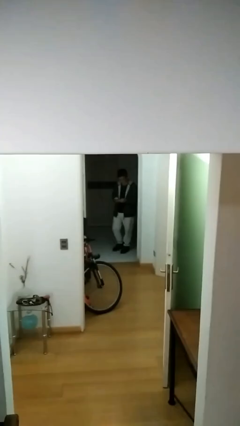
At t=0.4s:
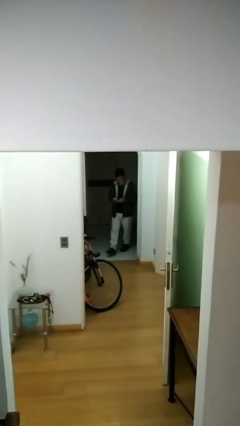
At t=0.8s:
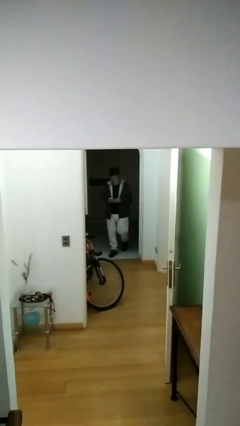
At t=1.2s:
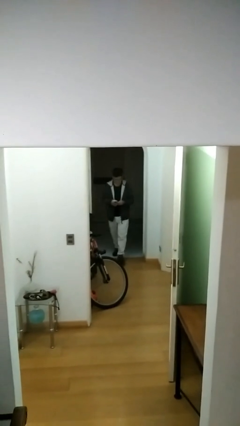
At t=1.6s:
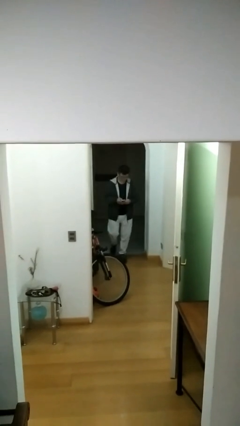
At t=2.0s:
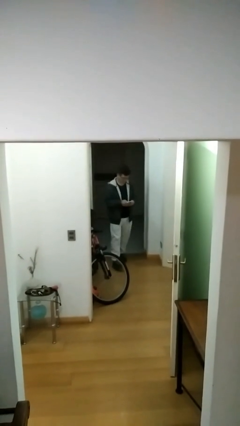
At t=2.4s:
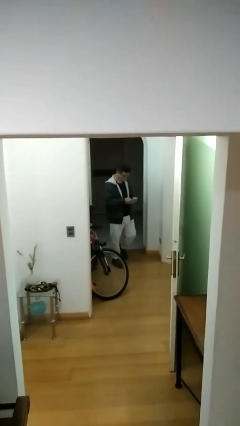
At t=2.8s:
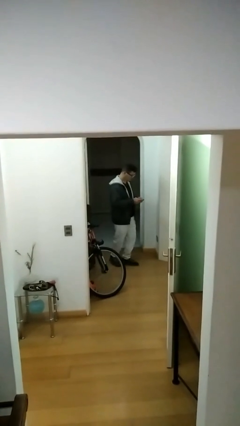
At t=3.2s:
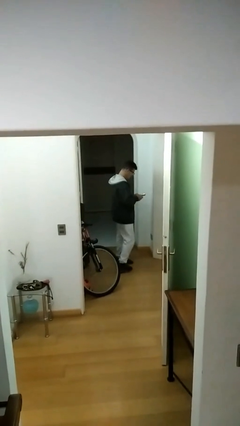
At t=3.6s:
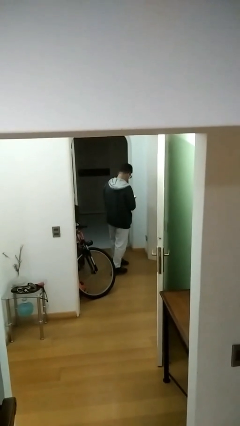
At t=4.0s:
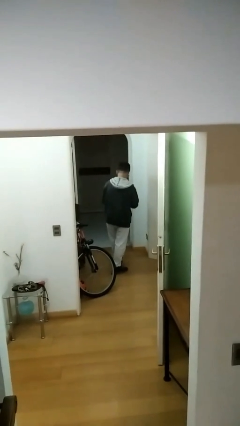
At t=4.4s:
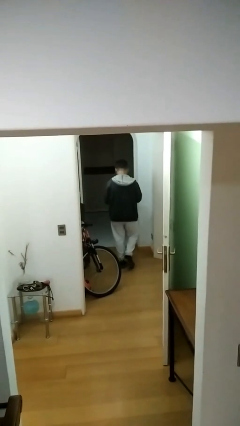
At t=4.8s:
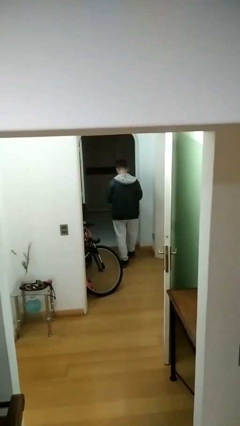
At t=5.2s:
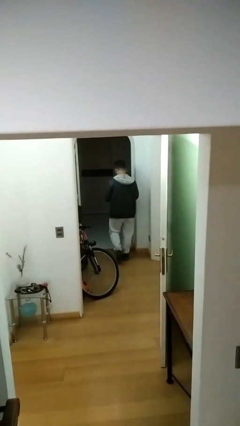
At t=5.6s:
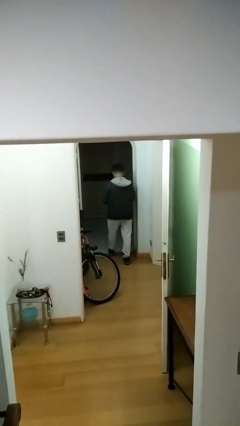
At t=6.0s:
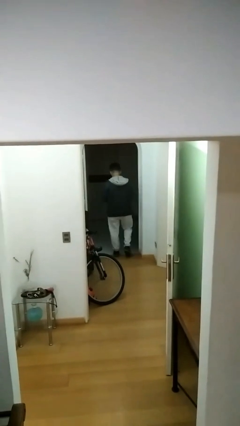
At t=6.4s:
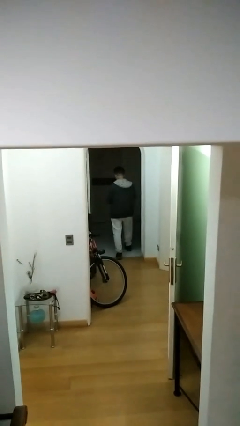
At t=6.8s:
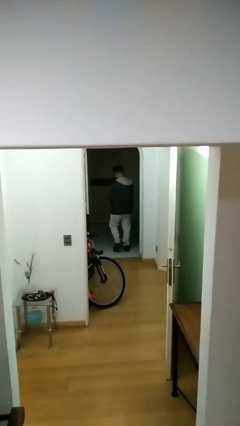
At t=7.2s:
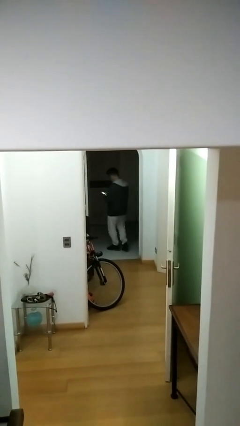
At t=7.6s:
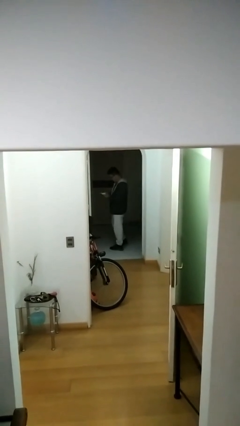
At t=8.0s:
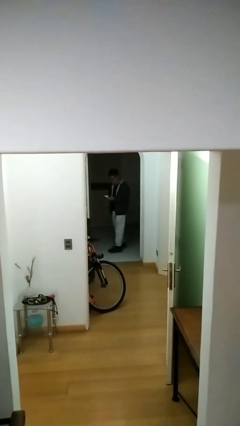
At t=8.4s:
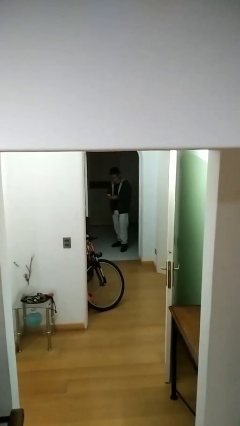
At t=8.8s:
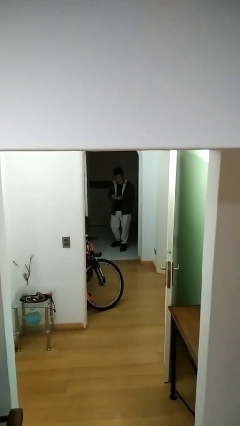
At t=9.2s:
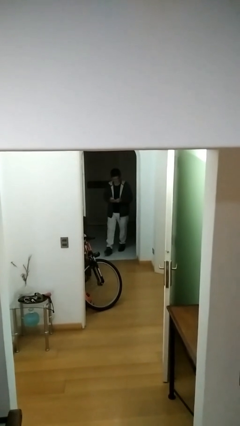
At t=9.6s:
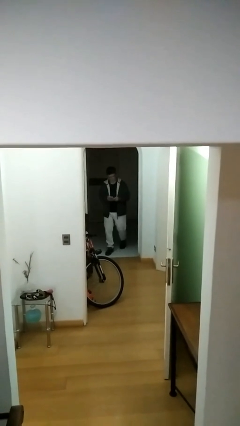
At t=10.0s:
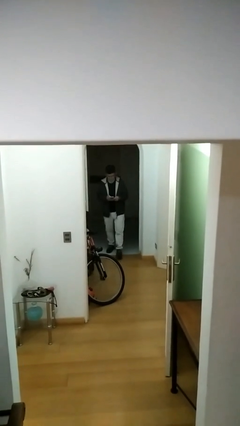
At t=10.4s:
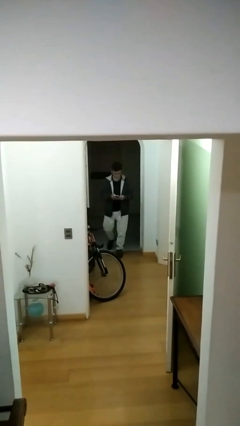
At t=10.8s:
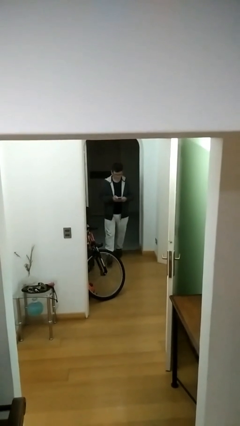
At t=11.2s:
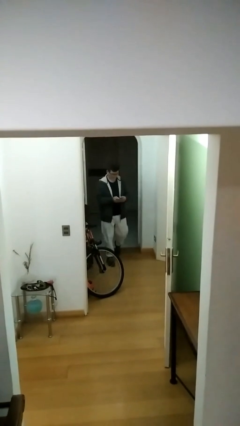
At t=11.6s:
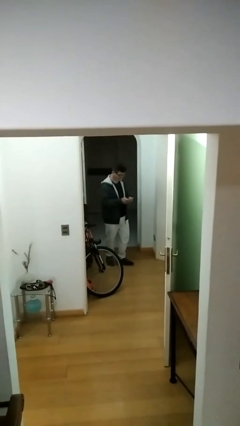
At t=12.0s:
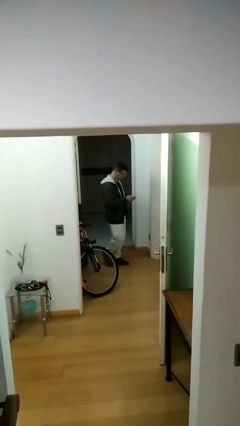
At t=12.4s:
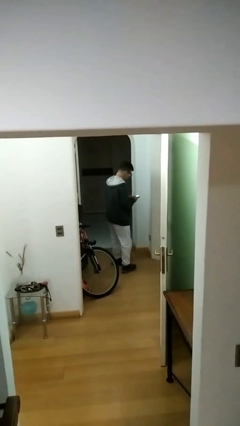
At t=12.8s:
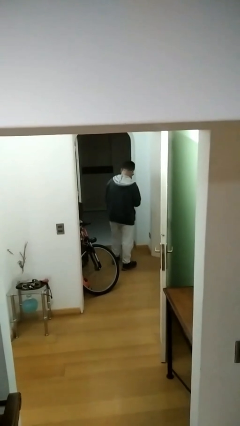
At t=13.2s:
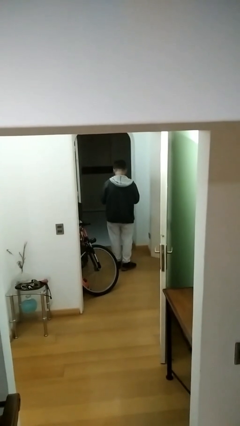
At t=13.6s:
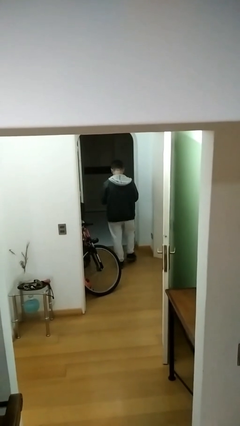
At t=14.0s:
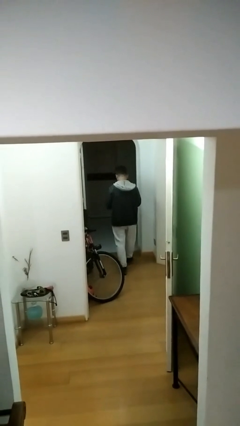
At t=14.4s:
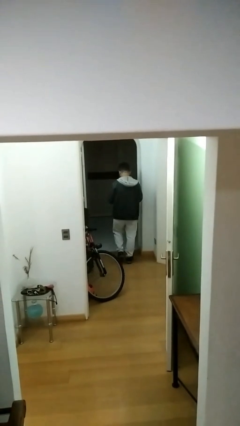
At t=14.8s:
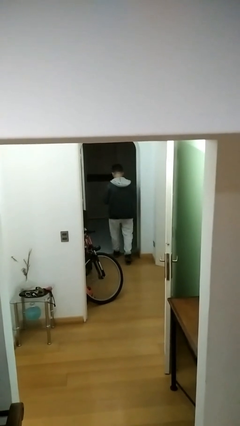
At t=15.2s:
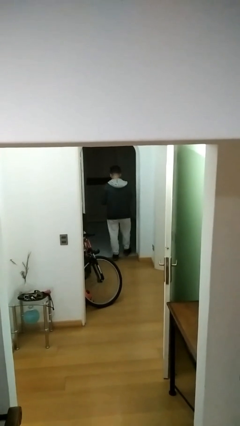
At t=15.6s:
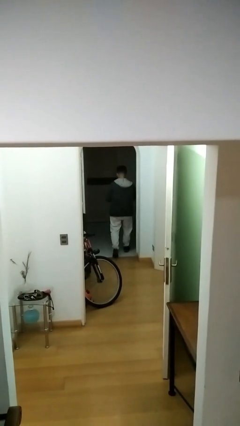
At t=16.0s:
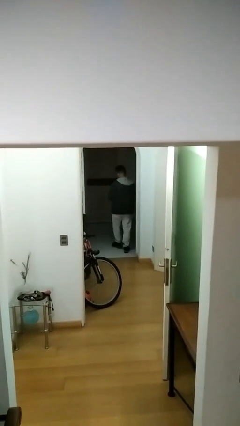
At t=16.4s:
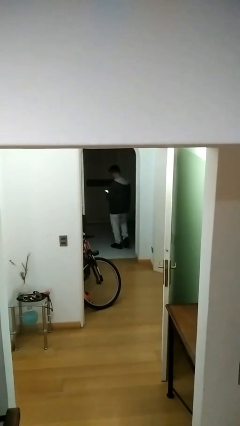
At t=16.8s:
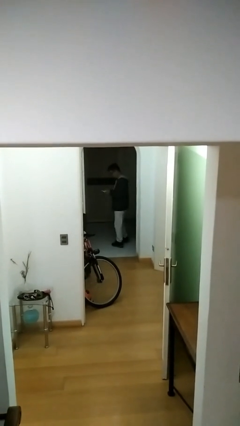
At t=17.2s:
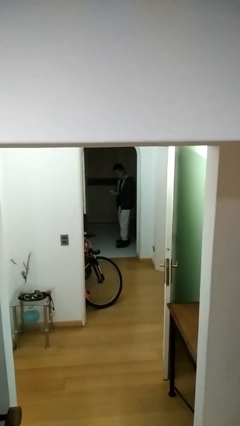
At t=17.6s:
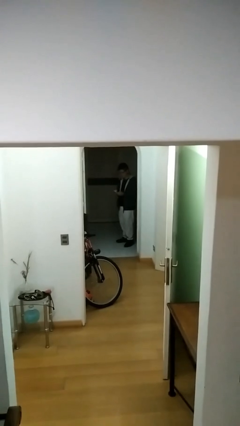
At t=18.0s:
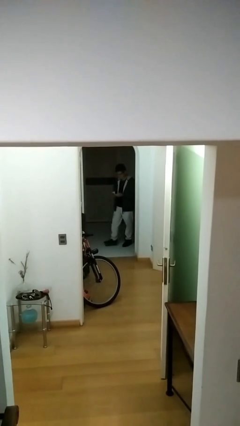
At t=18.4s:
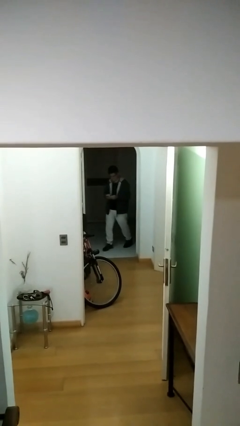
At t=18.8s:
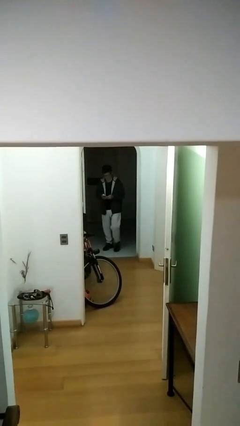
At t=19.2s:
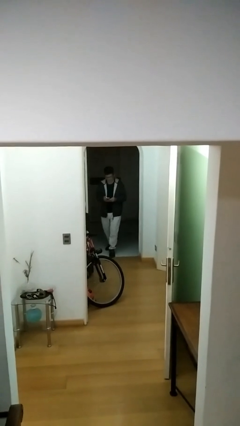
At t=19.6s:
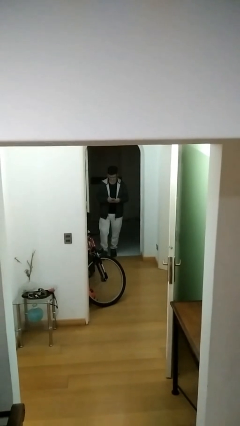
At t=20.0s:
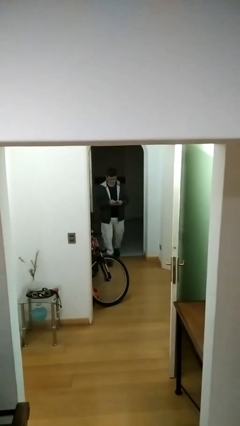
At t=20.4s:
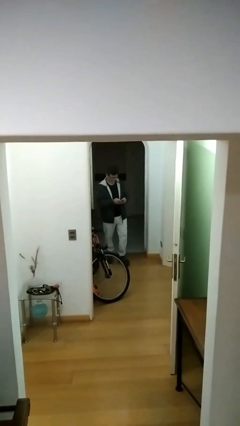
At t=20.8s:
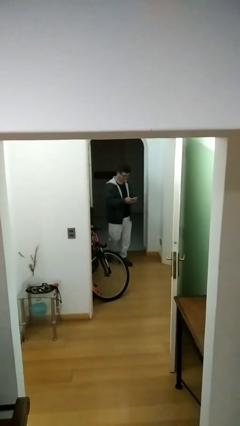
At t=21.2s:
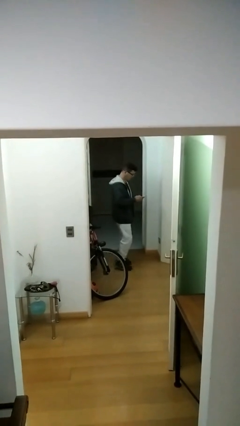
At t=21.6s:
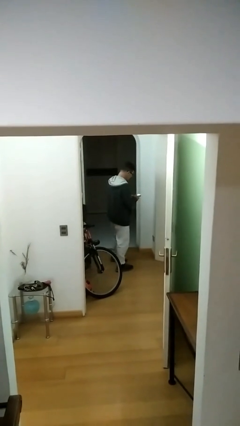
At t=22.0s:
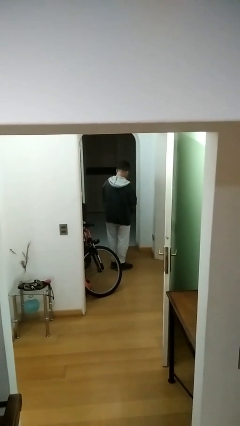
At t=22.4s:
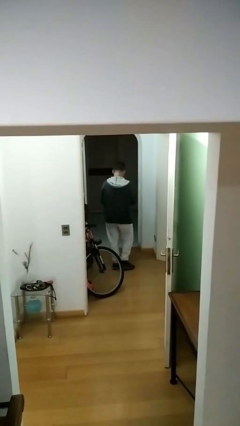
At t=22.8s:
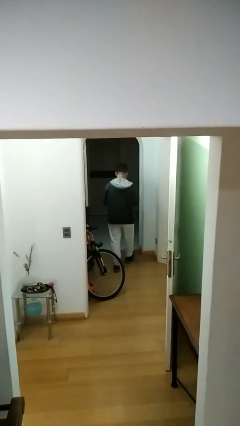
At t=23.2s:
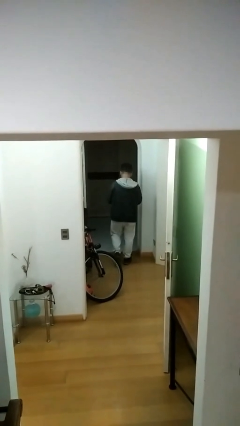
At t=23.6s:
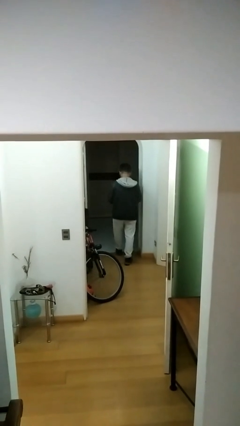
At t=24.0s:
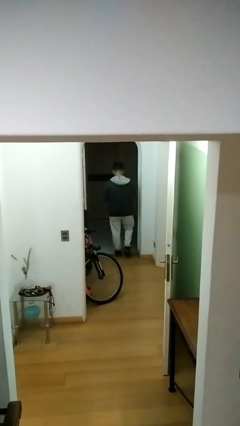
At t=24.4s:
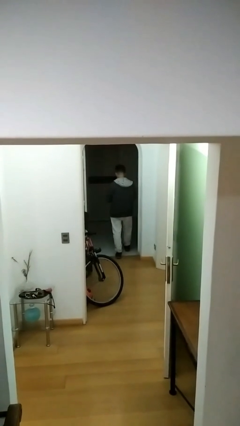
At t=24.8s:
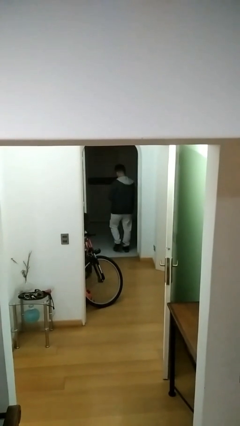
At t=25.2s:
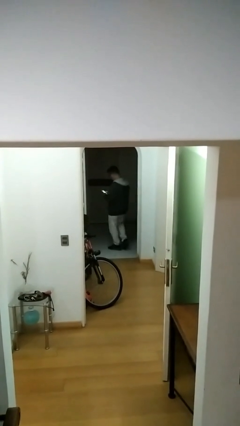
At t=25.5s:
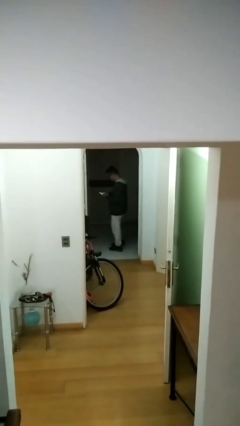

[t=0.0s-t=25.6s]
person texts on phone

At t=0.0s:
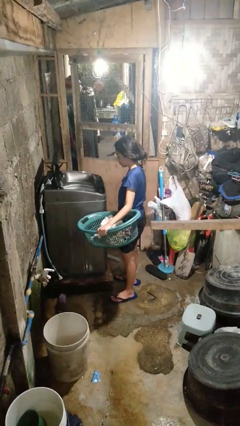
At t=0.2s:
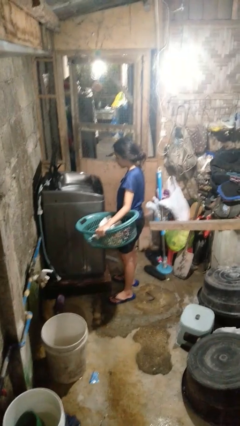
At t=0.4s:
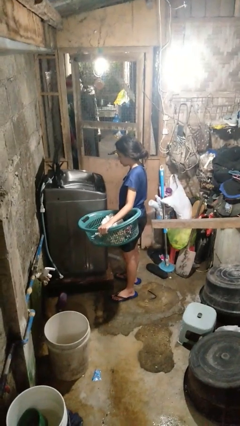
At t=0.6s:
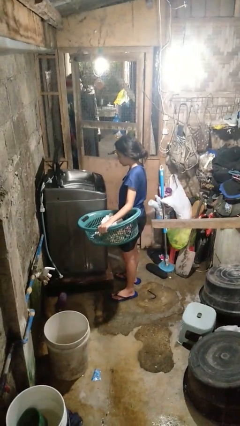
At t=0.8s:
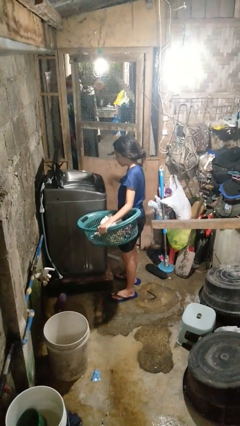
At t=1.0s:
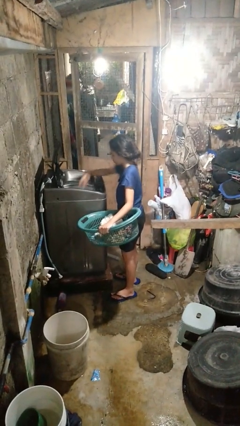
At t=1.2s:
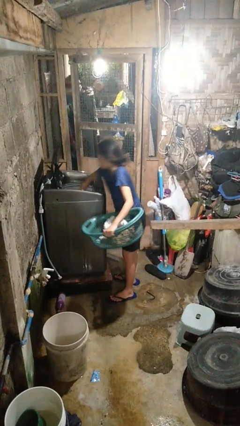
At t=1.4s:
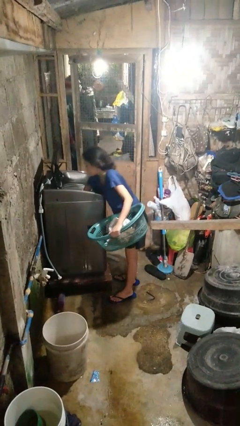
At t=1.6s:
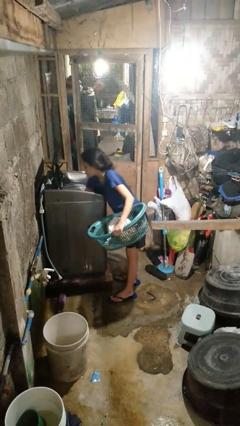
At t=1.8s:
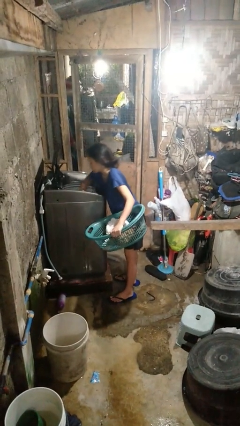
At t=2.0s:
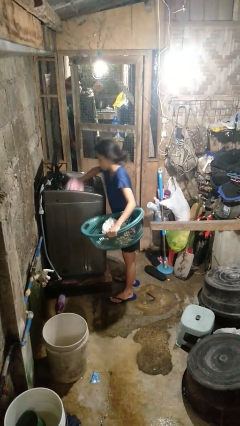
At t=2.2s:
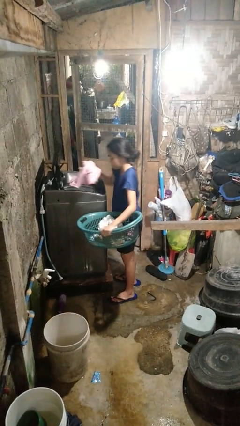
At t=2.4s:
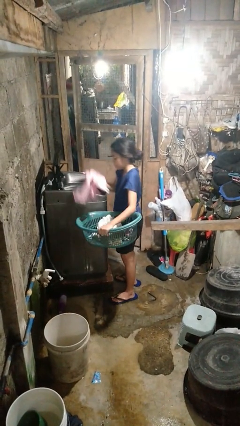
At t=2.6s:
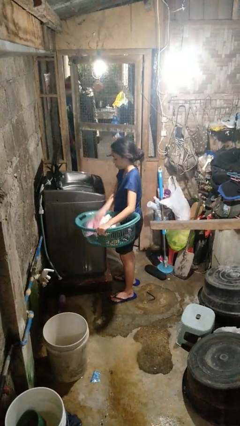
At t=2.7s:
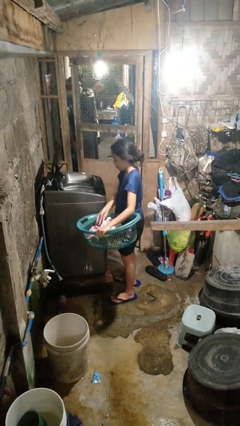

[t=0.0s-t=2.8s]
person unloads clotheswasher

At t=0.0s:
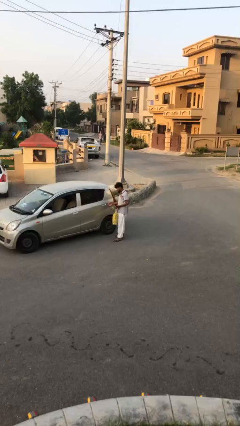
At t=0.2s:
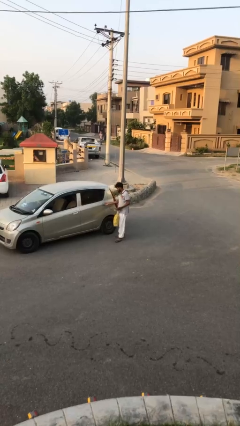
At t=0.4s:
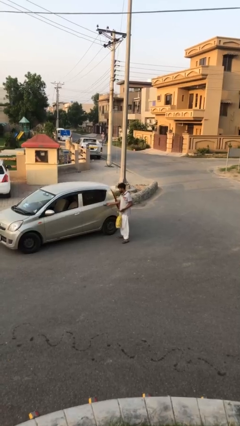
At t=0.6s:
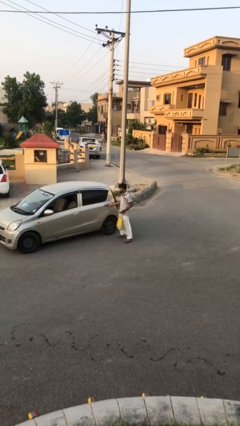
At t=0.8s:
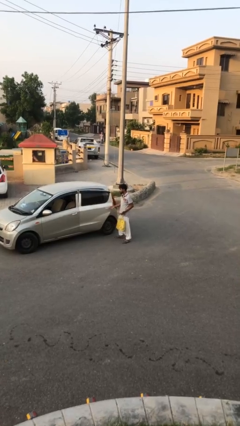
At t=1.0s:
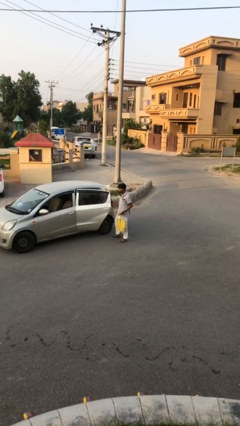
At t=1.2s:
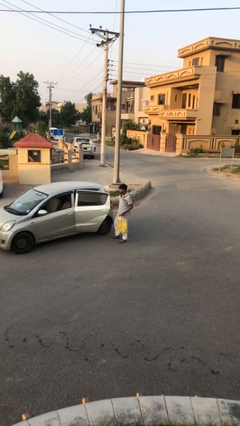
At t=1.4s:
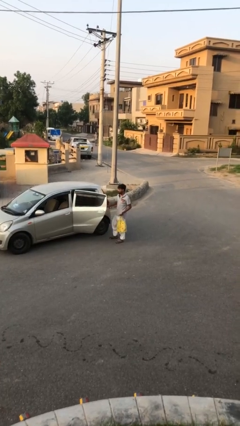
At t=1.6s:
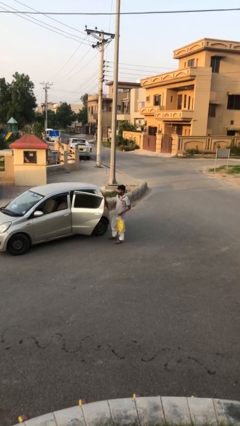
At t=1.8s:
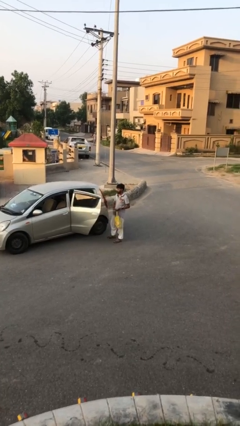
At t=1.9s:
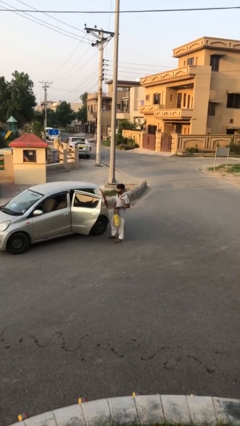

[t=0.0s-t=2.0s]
person opens car door

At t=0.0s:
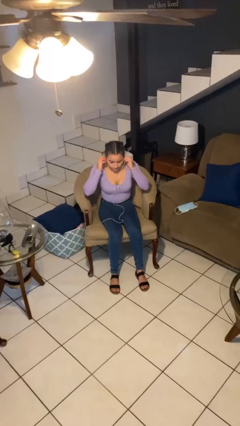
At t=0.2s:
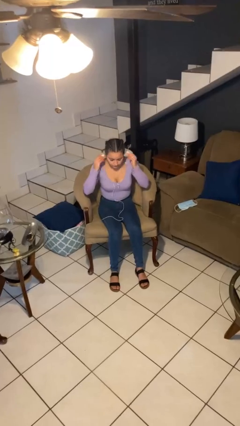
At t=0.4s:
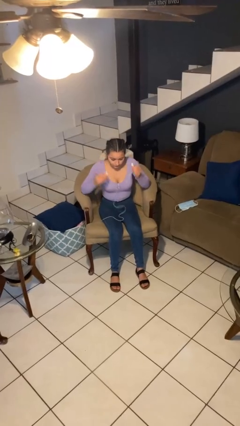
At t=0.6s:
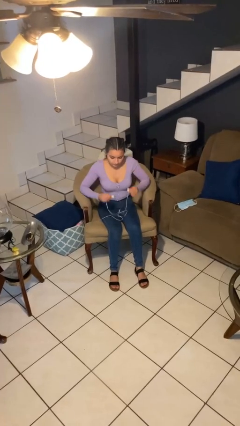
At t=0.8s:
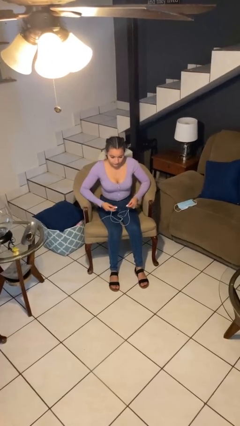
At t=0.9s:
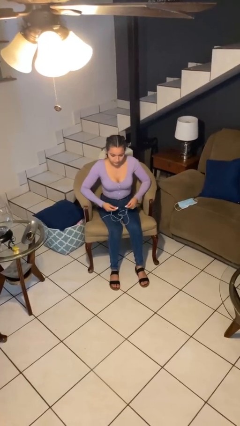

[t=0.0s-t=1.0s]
person takes off headphones
